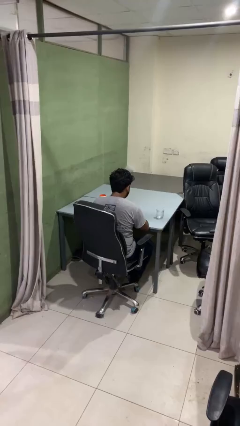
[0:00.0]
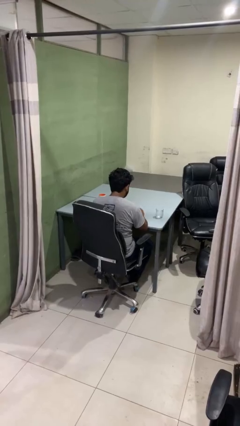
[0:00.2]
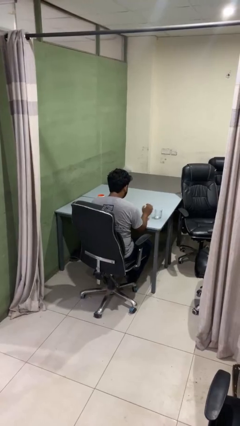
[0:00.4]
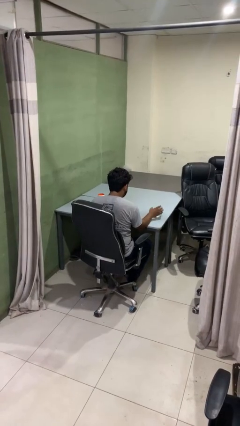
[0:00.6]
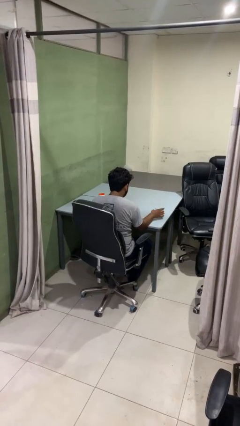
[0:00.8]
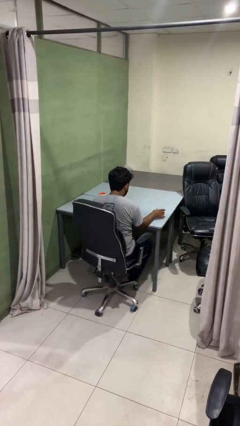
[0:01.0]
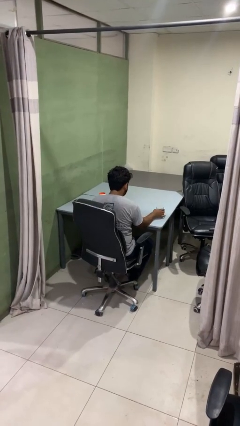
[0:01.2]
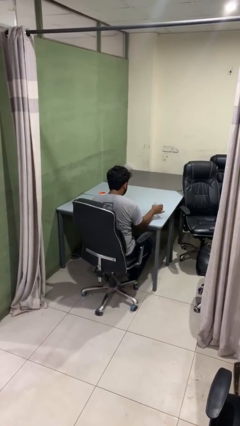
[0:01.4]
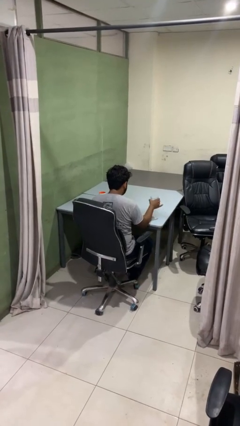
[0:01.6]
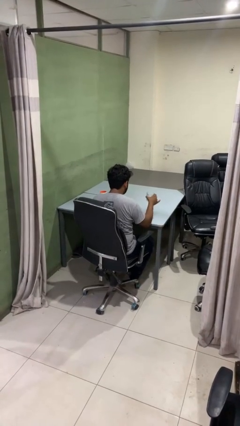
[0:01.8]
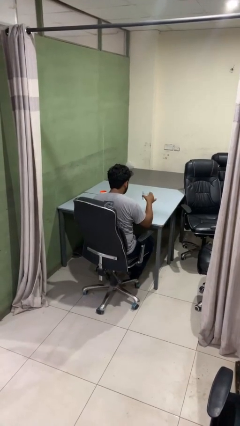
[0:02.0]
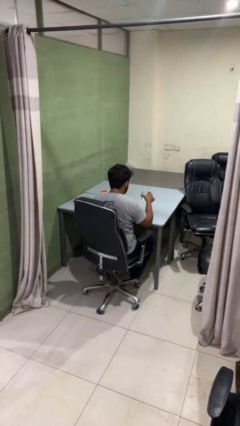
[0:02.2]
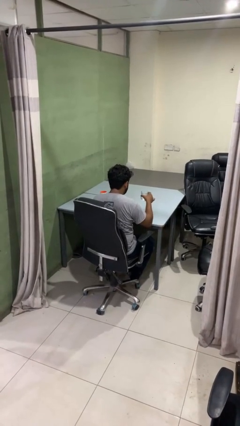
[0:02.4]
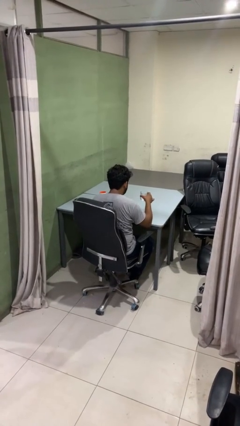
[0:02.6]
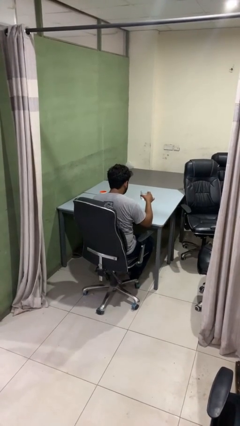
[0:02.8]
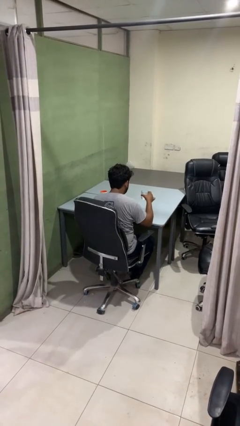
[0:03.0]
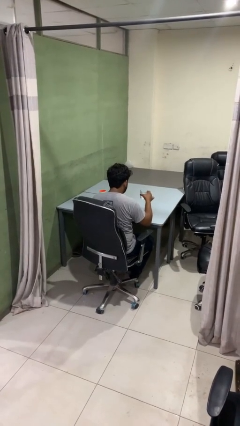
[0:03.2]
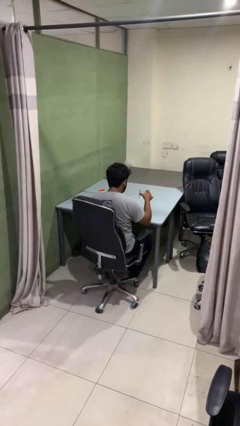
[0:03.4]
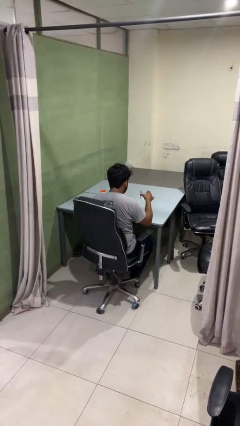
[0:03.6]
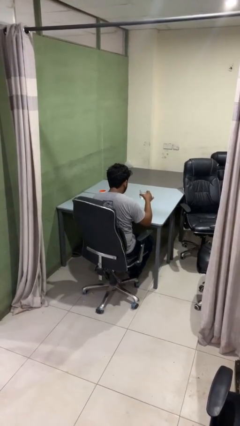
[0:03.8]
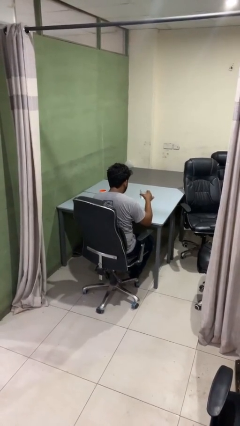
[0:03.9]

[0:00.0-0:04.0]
person picks up object from table

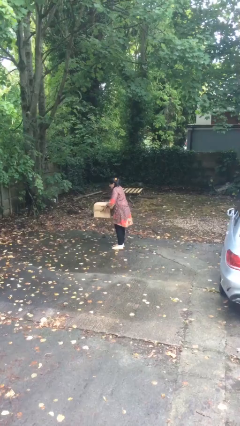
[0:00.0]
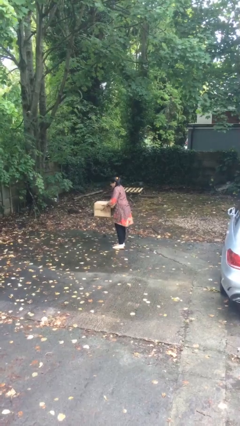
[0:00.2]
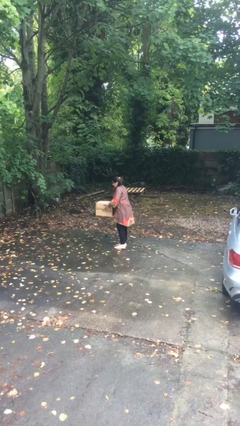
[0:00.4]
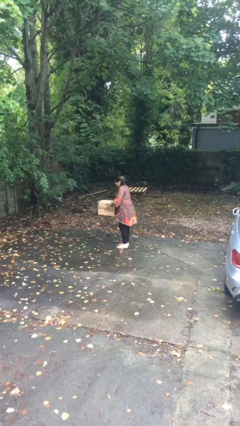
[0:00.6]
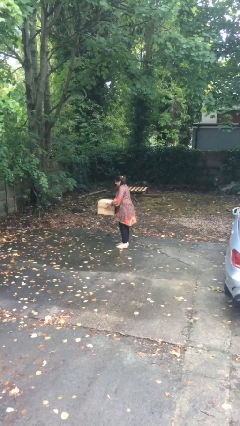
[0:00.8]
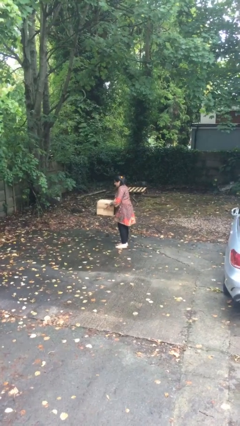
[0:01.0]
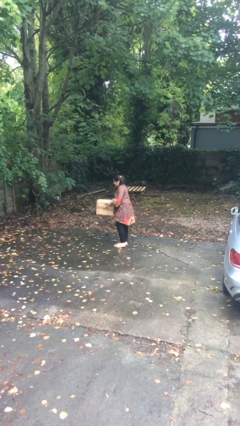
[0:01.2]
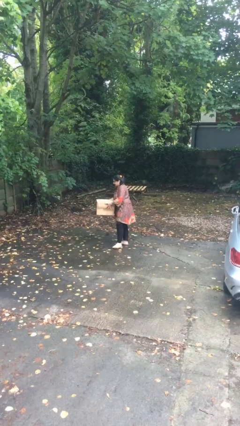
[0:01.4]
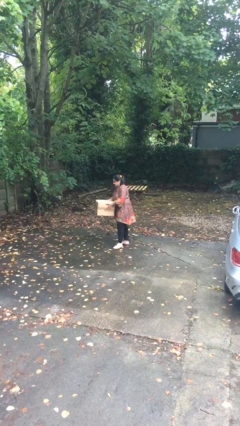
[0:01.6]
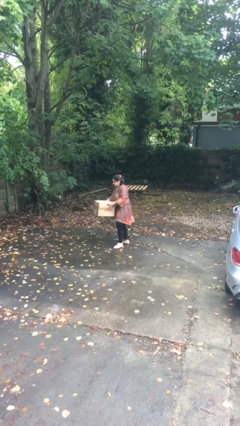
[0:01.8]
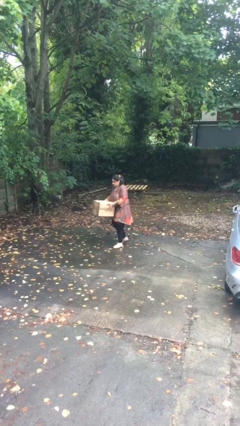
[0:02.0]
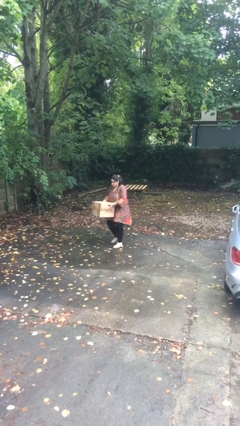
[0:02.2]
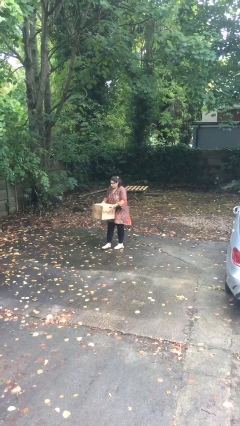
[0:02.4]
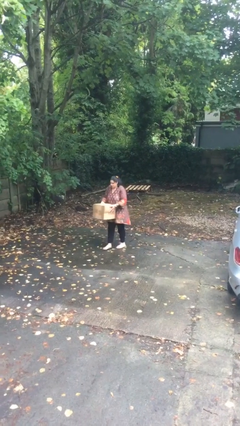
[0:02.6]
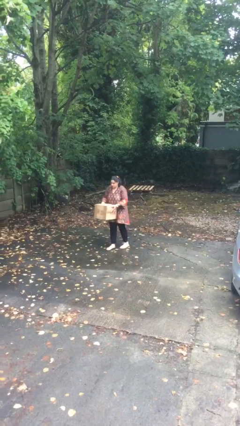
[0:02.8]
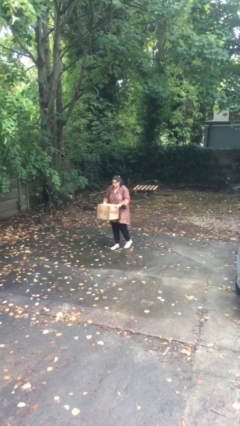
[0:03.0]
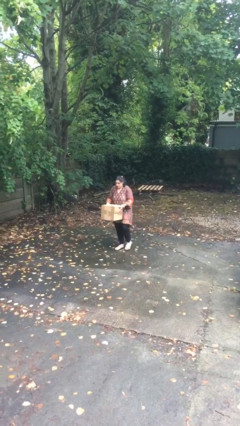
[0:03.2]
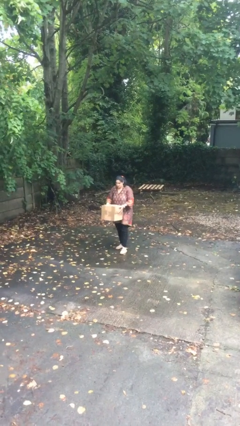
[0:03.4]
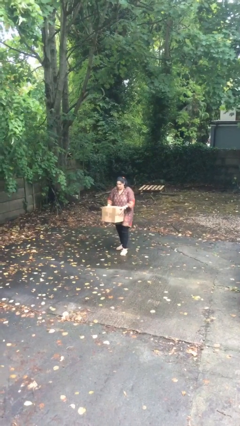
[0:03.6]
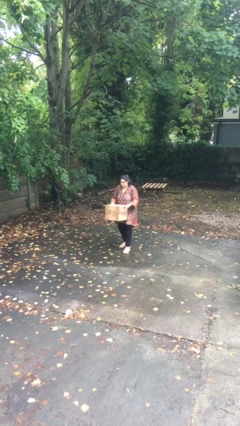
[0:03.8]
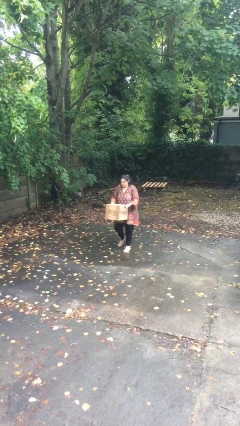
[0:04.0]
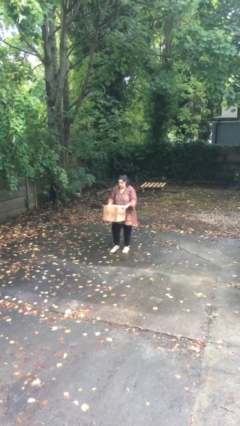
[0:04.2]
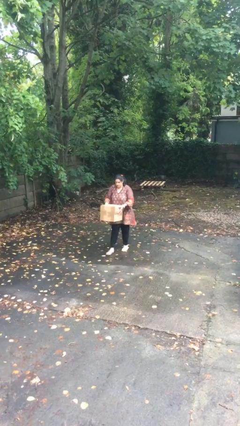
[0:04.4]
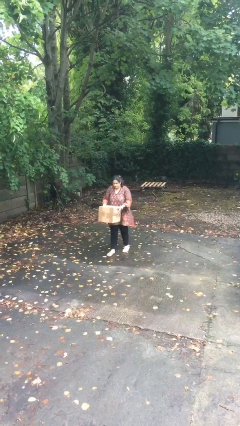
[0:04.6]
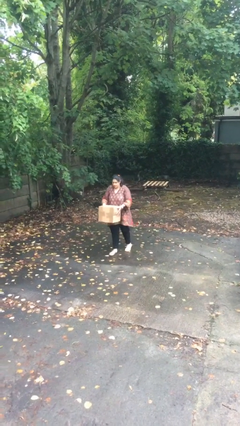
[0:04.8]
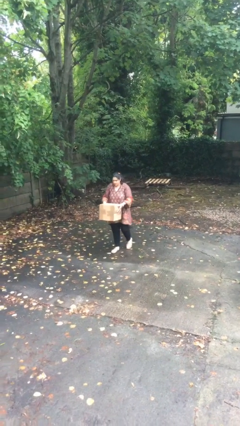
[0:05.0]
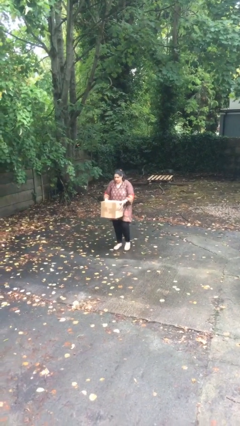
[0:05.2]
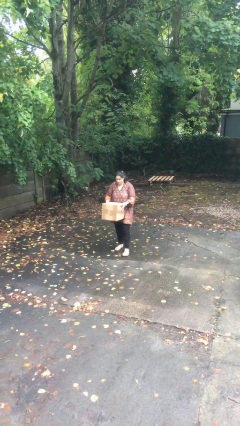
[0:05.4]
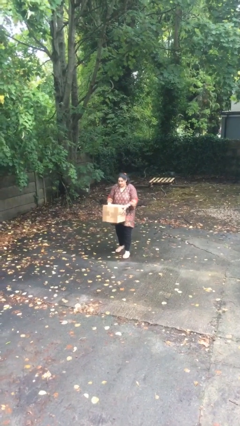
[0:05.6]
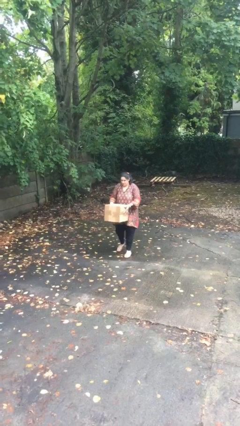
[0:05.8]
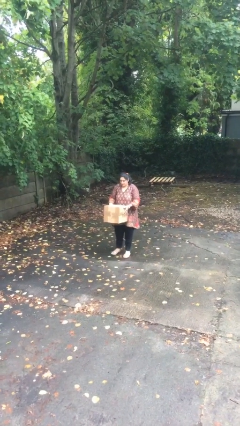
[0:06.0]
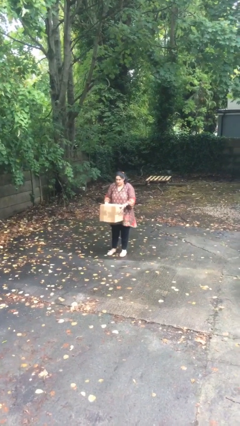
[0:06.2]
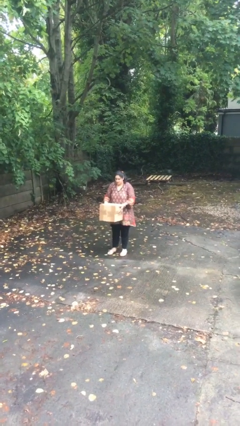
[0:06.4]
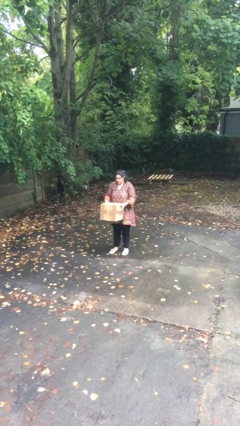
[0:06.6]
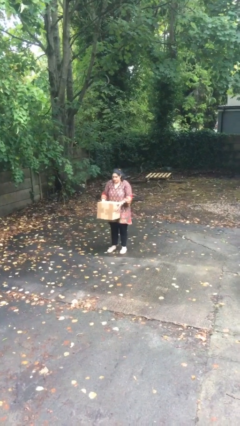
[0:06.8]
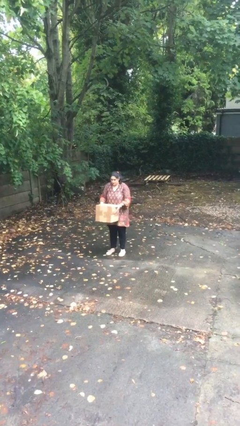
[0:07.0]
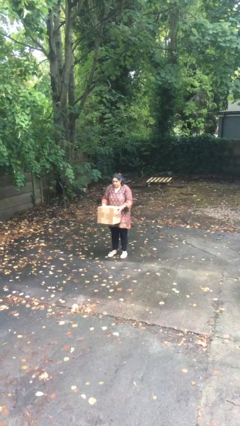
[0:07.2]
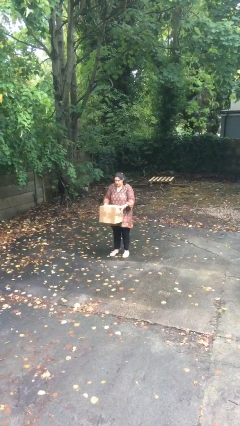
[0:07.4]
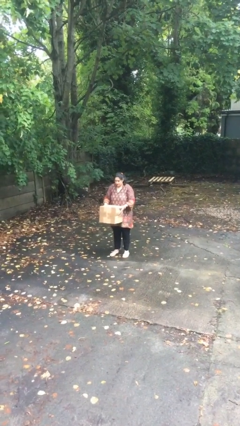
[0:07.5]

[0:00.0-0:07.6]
person carries heavy object

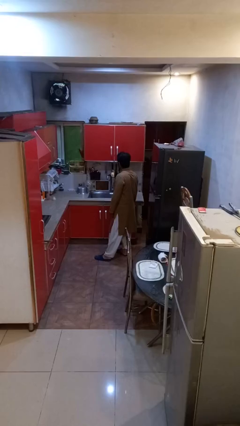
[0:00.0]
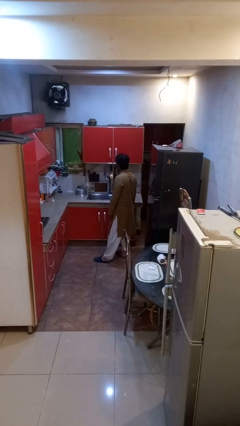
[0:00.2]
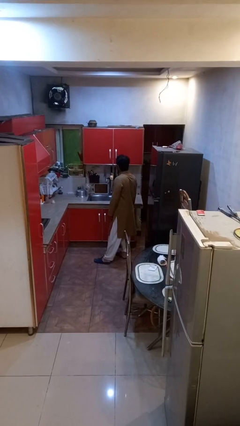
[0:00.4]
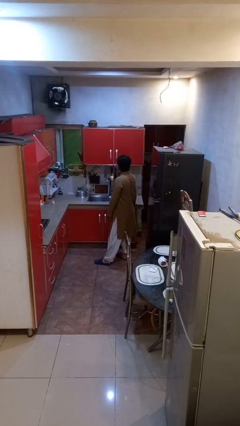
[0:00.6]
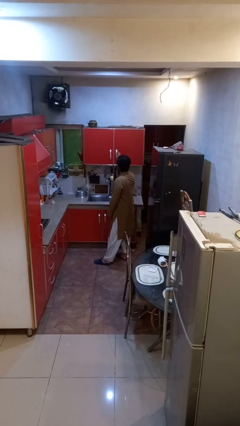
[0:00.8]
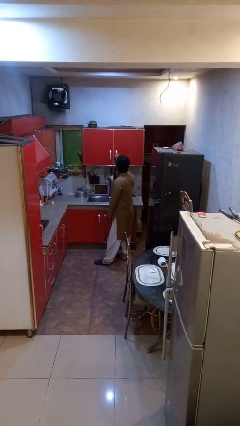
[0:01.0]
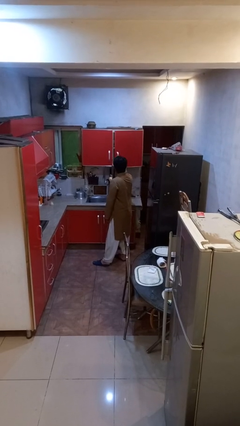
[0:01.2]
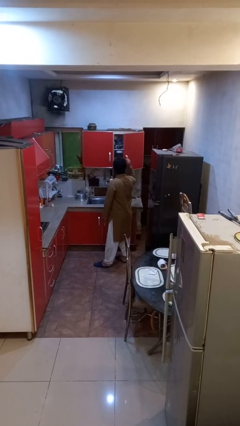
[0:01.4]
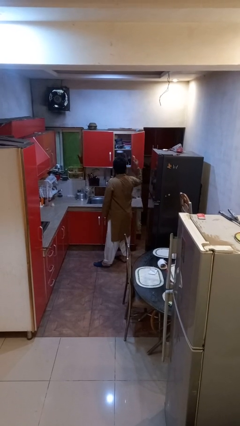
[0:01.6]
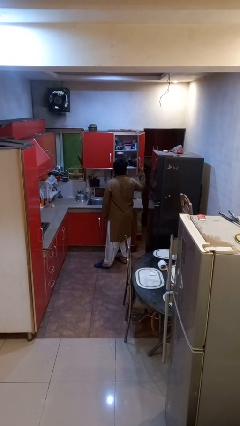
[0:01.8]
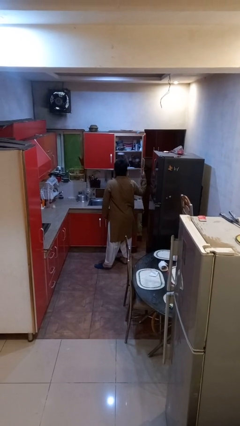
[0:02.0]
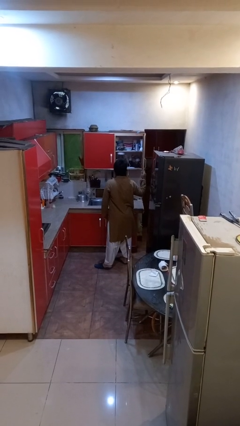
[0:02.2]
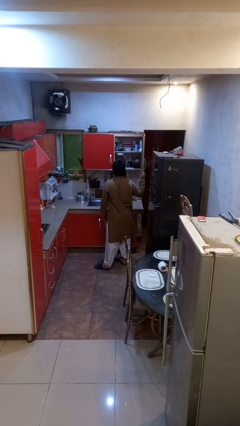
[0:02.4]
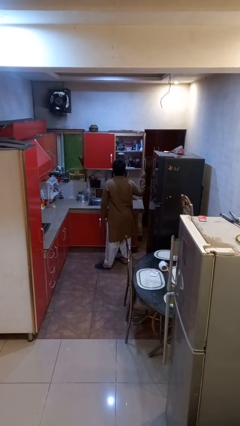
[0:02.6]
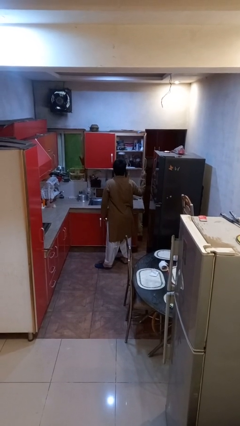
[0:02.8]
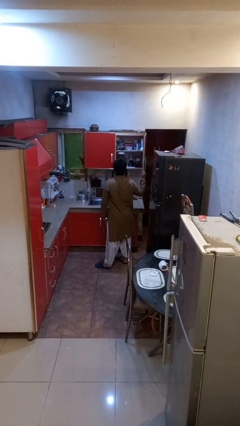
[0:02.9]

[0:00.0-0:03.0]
person opens cabinet

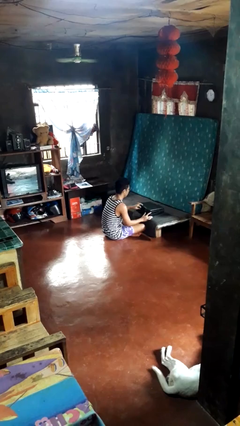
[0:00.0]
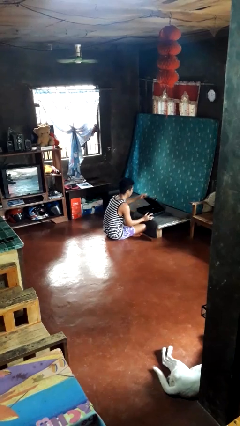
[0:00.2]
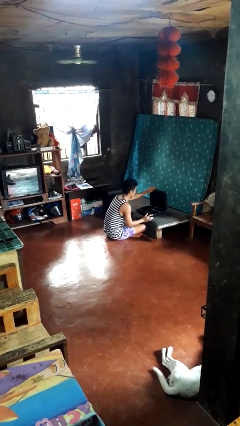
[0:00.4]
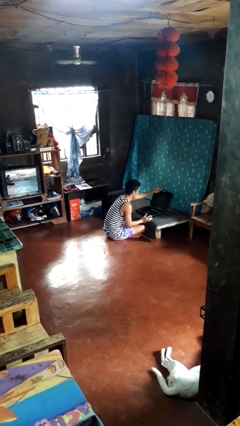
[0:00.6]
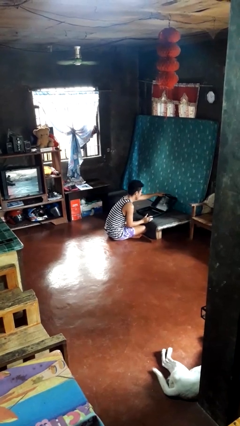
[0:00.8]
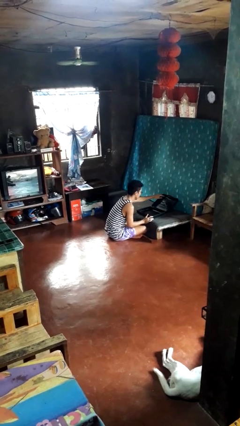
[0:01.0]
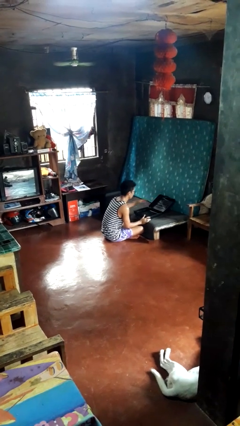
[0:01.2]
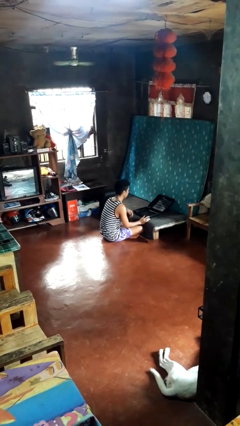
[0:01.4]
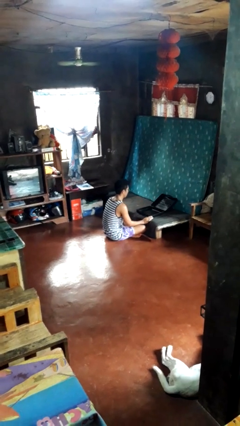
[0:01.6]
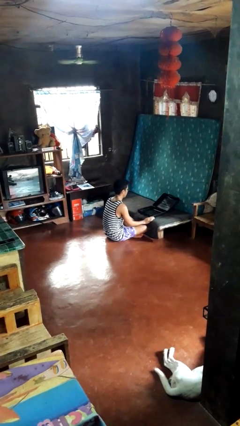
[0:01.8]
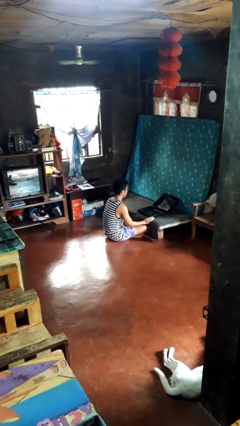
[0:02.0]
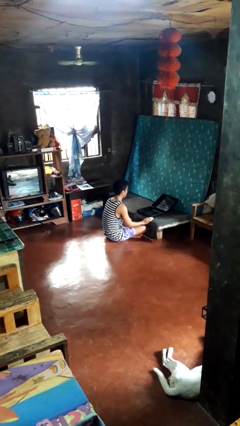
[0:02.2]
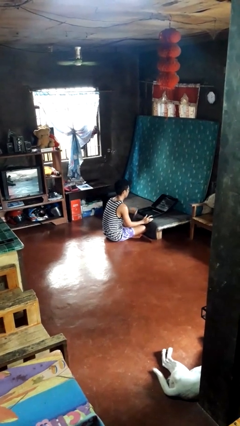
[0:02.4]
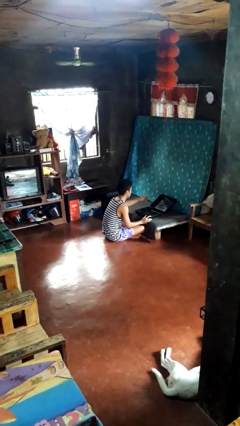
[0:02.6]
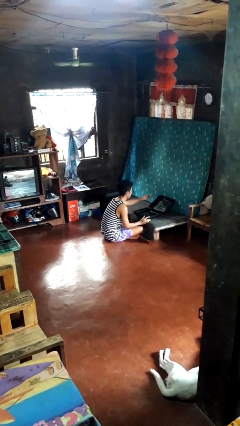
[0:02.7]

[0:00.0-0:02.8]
person opens suitcase

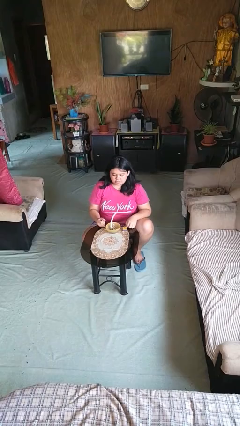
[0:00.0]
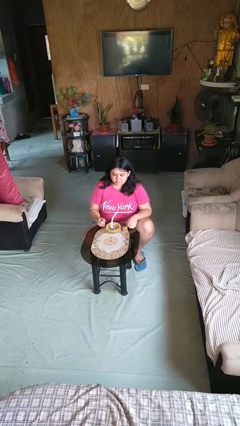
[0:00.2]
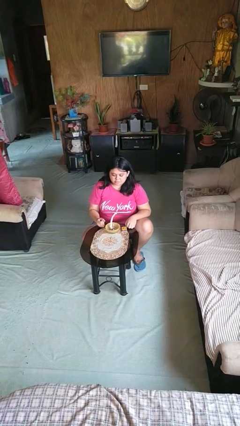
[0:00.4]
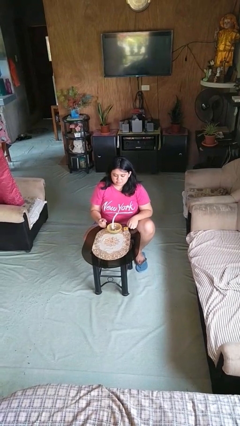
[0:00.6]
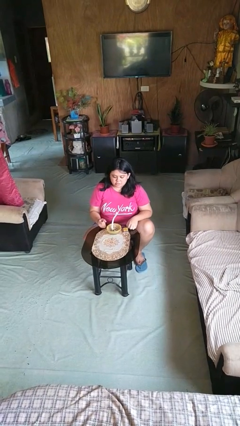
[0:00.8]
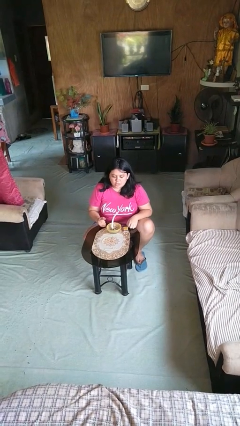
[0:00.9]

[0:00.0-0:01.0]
person extinguishes candle
